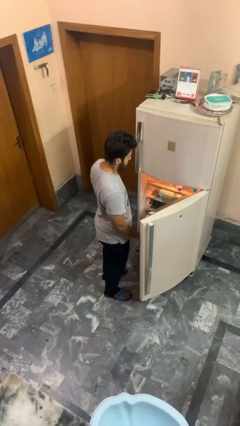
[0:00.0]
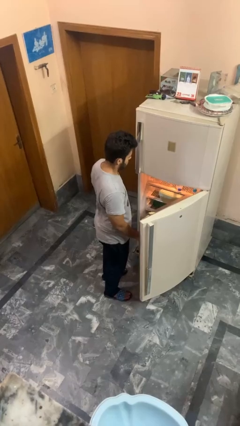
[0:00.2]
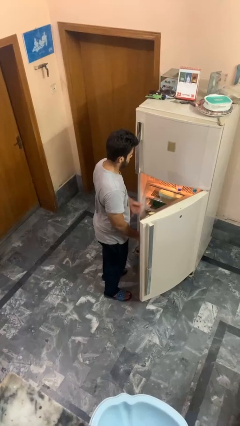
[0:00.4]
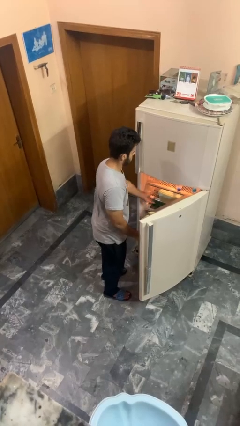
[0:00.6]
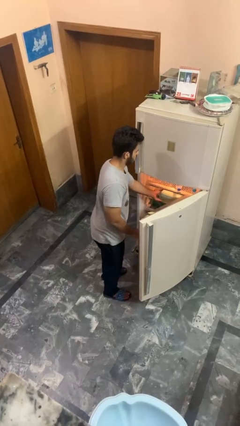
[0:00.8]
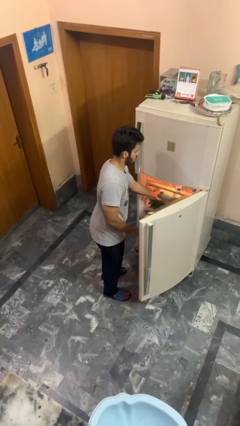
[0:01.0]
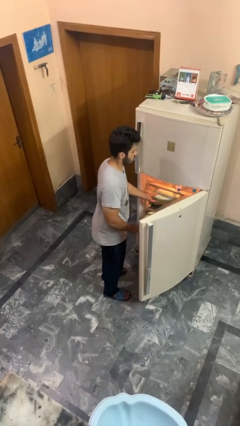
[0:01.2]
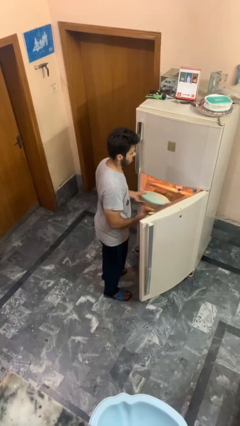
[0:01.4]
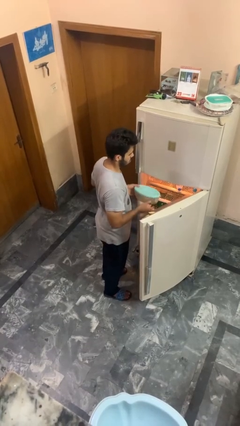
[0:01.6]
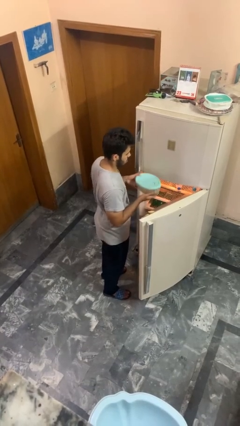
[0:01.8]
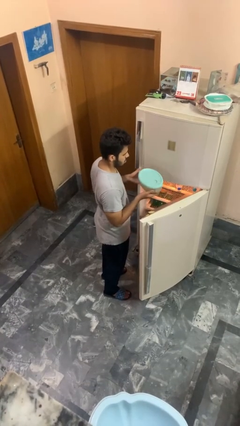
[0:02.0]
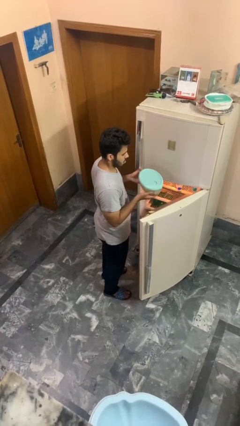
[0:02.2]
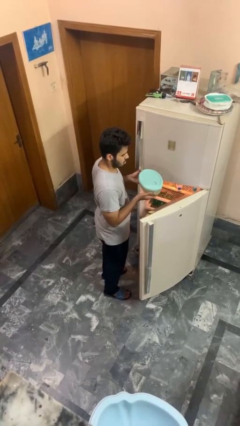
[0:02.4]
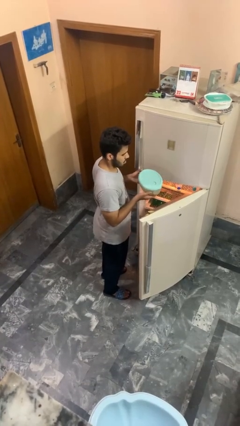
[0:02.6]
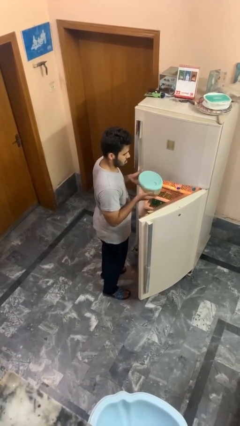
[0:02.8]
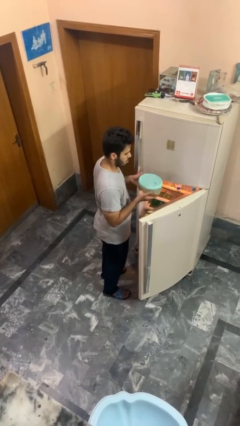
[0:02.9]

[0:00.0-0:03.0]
person picks up object from cabinet

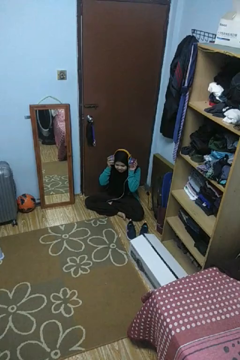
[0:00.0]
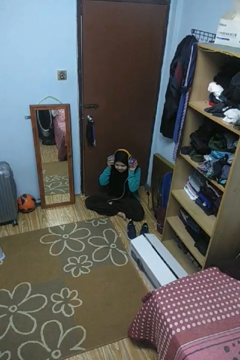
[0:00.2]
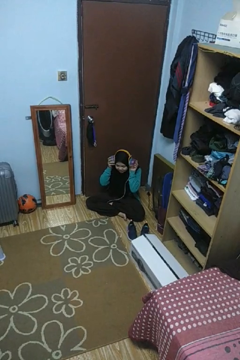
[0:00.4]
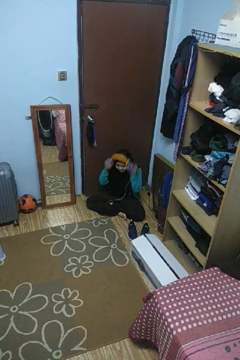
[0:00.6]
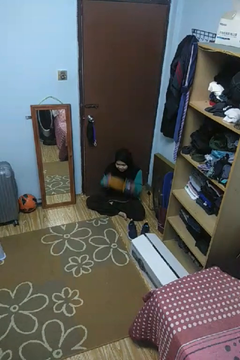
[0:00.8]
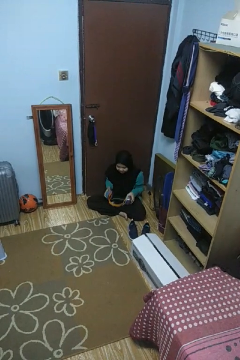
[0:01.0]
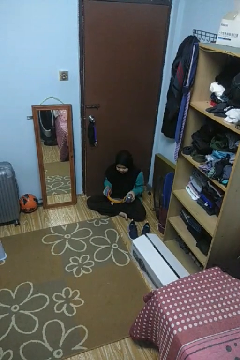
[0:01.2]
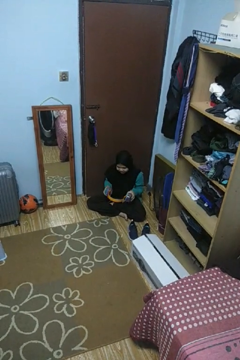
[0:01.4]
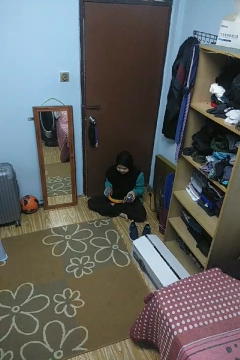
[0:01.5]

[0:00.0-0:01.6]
person takes off headphones

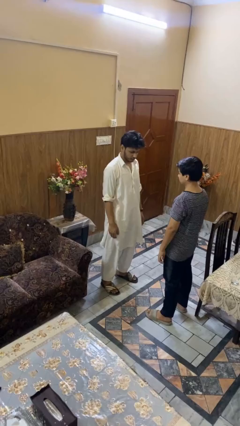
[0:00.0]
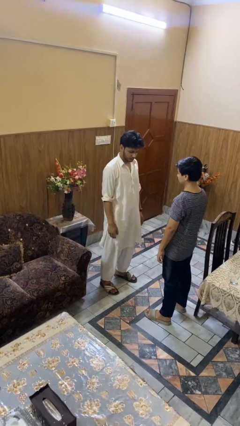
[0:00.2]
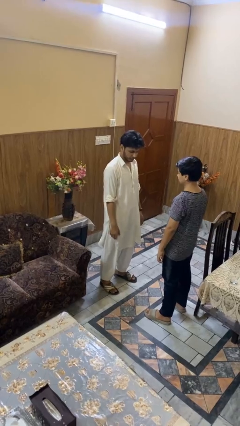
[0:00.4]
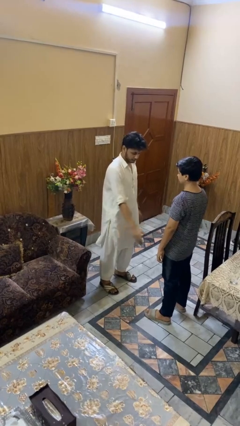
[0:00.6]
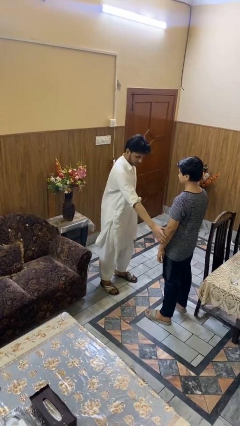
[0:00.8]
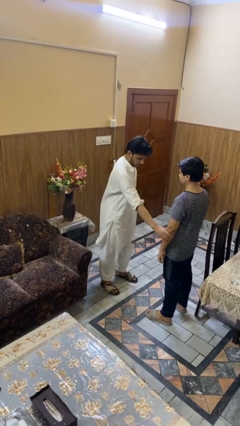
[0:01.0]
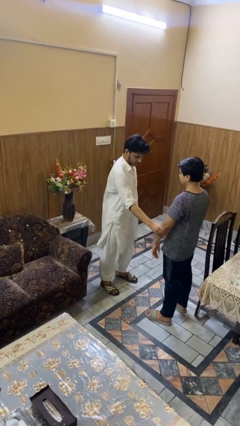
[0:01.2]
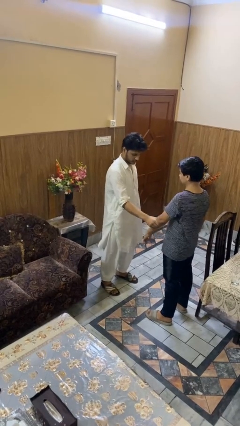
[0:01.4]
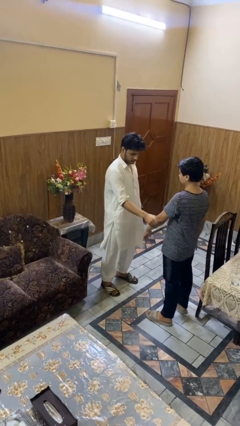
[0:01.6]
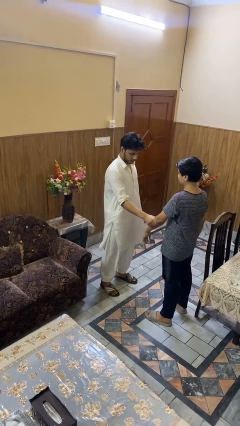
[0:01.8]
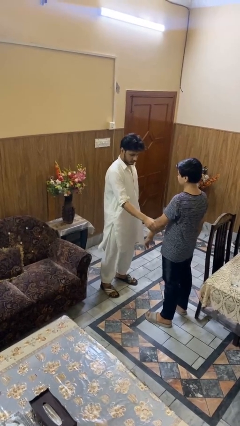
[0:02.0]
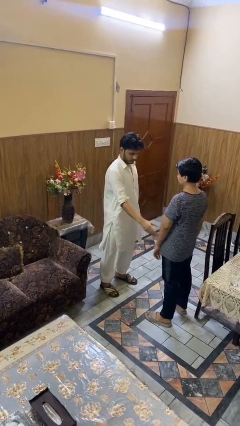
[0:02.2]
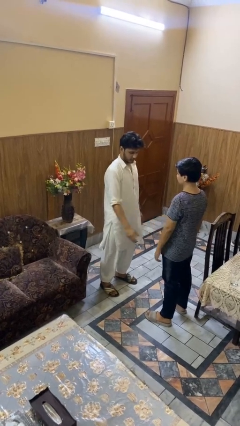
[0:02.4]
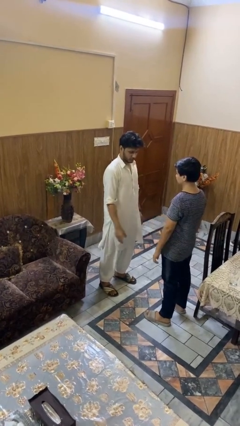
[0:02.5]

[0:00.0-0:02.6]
person grabs person by forearm

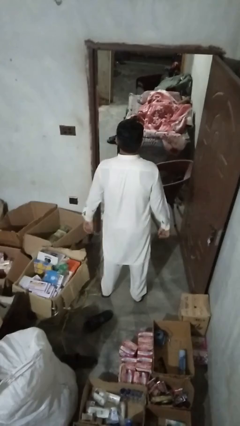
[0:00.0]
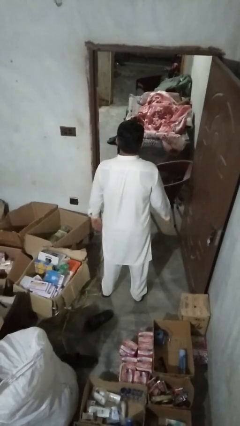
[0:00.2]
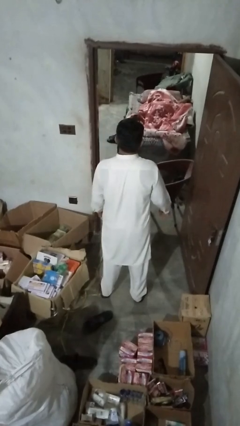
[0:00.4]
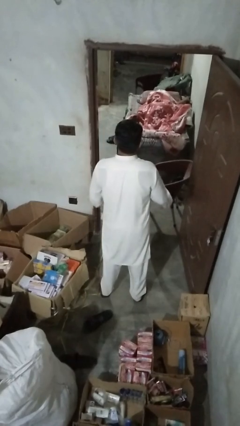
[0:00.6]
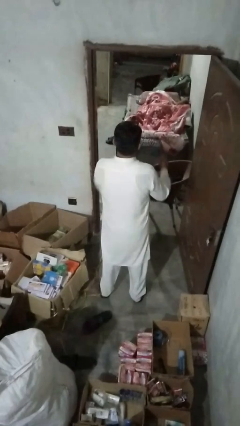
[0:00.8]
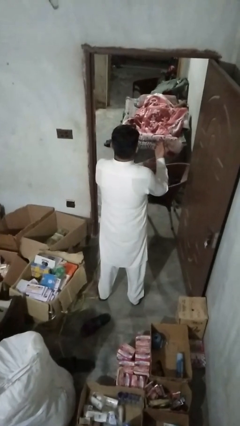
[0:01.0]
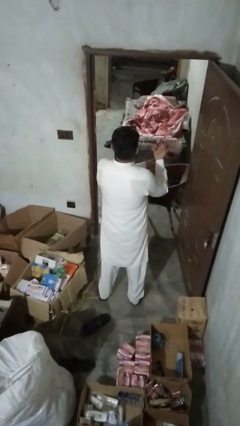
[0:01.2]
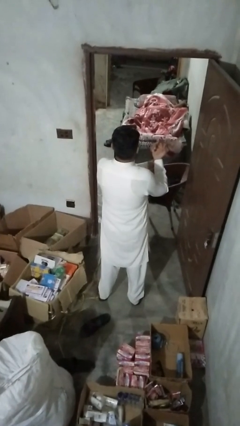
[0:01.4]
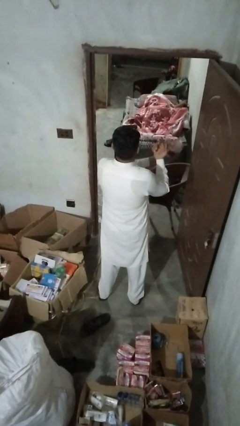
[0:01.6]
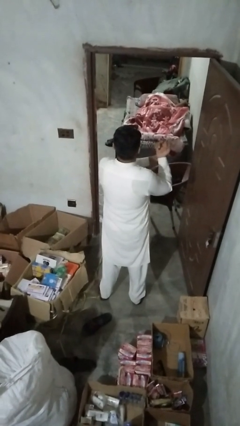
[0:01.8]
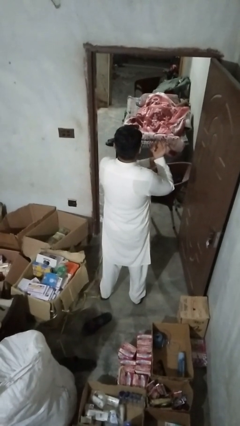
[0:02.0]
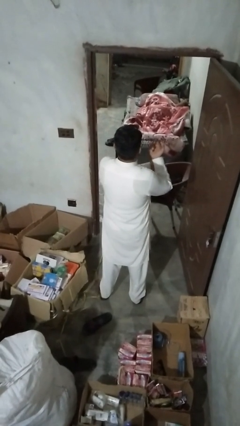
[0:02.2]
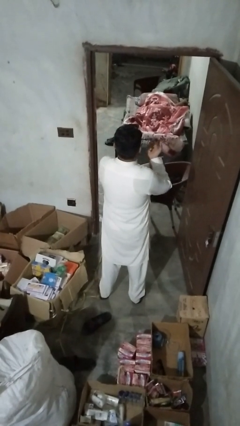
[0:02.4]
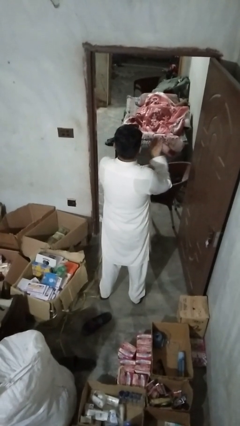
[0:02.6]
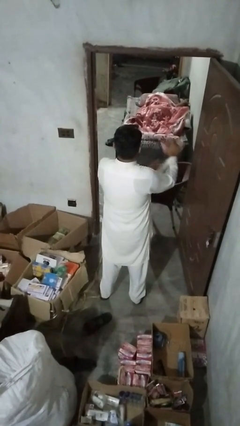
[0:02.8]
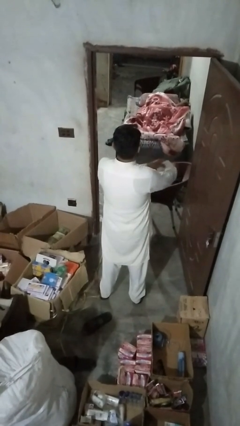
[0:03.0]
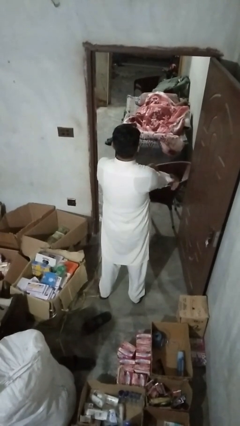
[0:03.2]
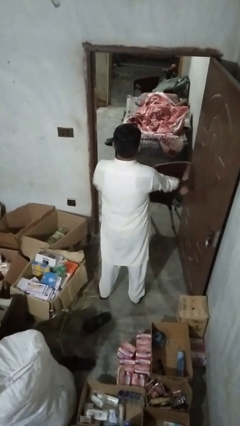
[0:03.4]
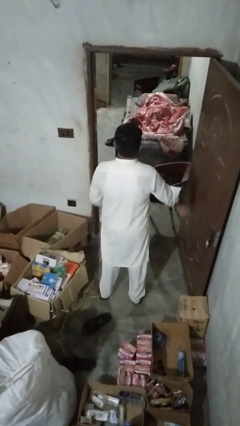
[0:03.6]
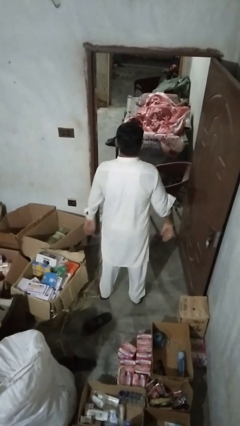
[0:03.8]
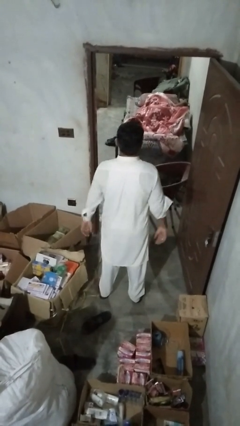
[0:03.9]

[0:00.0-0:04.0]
person unbuttons shirt

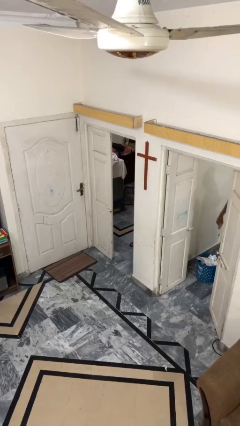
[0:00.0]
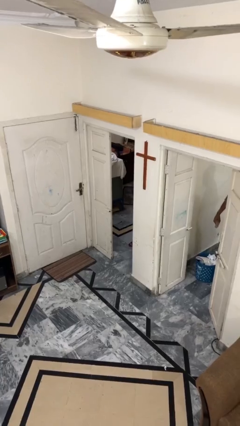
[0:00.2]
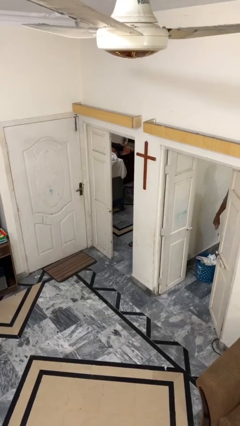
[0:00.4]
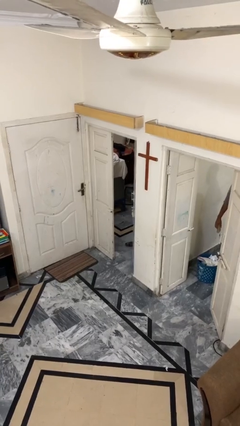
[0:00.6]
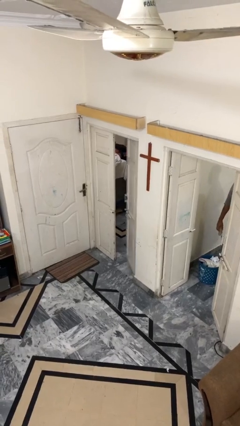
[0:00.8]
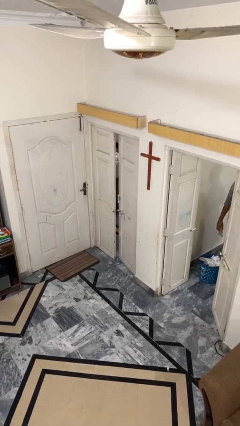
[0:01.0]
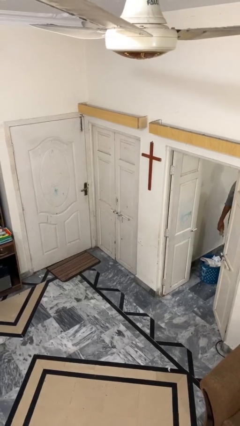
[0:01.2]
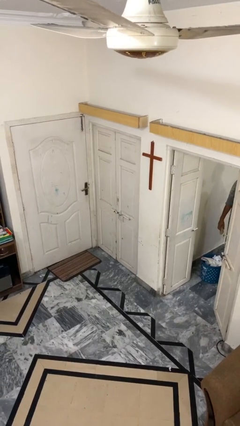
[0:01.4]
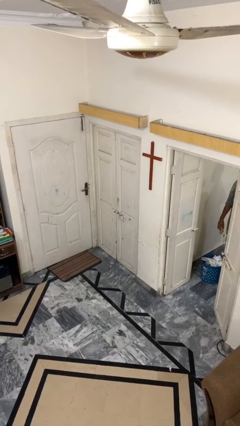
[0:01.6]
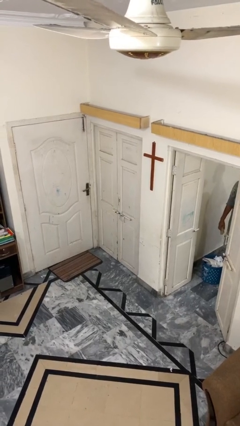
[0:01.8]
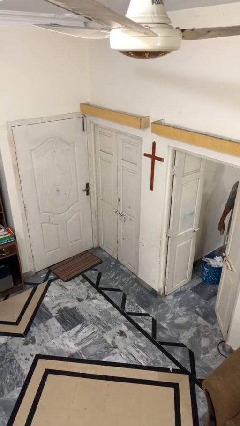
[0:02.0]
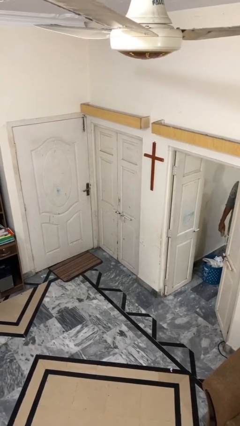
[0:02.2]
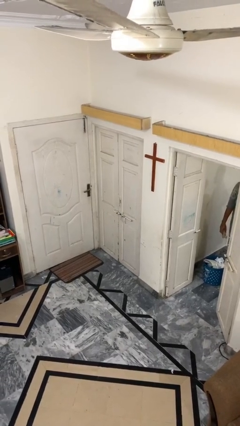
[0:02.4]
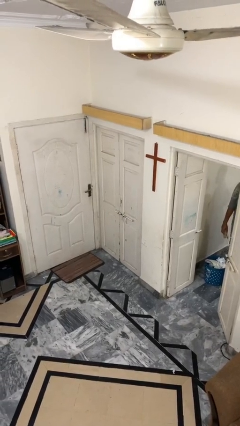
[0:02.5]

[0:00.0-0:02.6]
person closes facility door

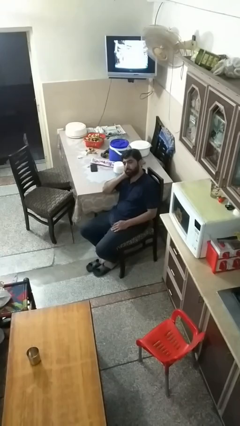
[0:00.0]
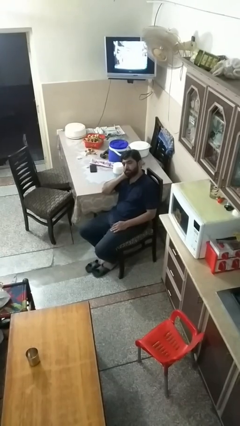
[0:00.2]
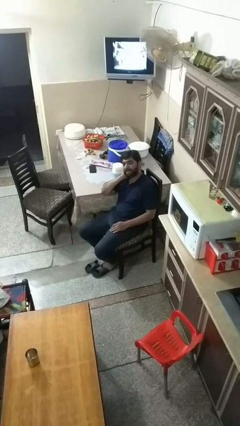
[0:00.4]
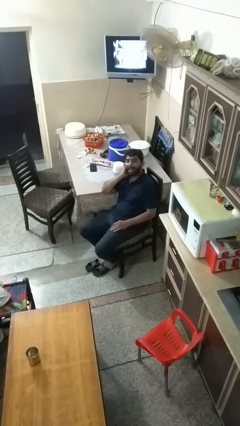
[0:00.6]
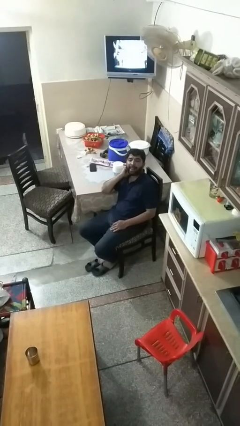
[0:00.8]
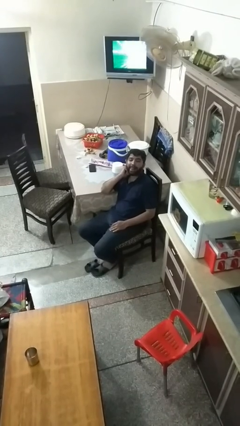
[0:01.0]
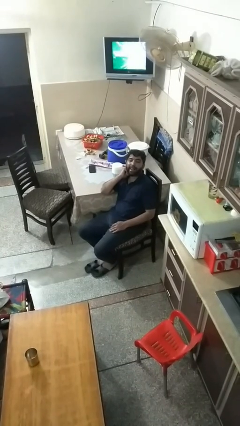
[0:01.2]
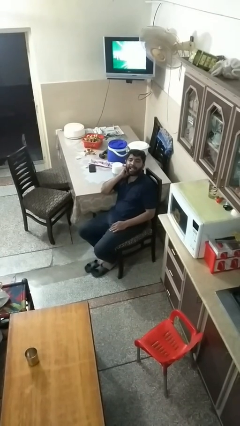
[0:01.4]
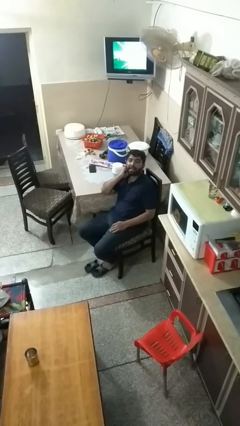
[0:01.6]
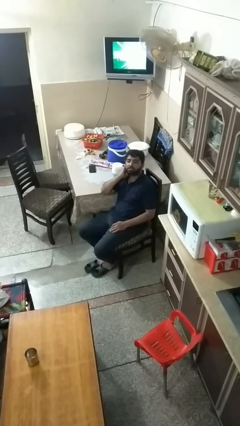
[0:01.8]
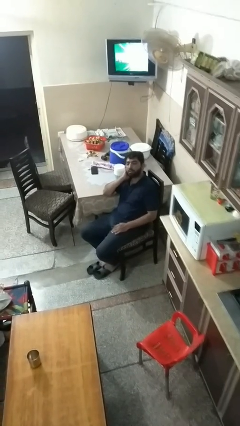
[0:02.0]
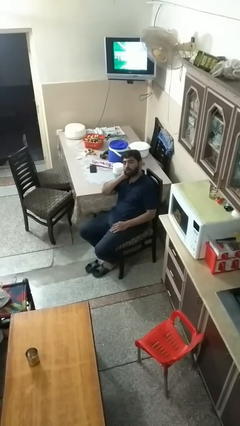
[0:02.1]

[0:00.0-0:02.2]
person sticks out tongue

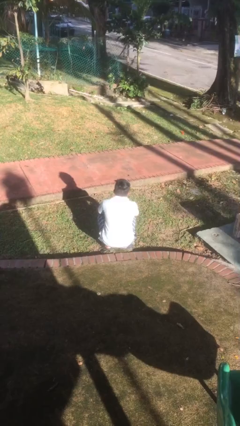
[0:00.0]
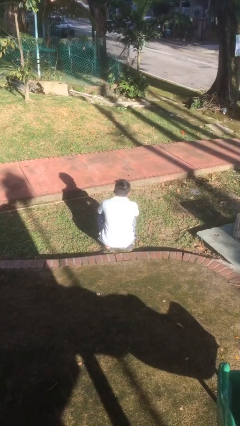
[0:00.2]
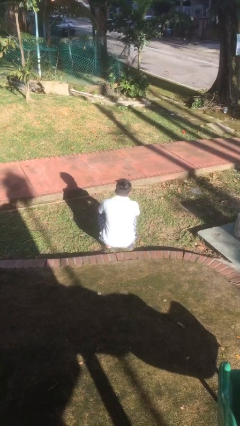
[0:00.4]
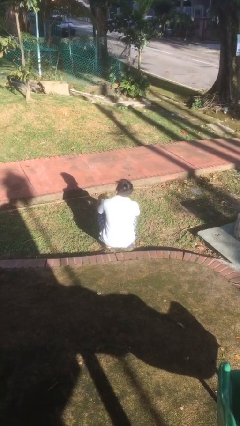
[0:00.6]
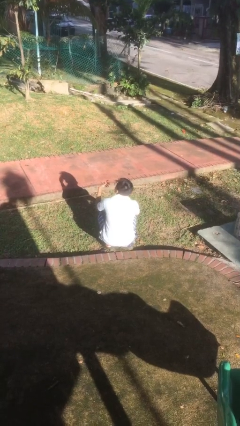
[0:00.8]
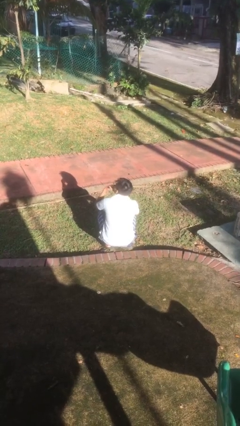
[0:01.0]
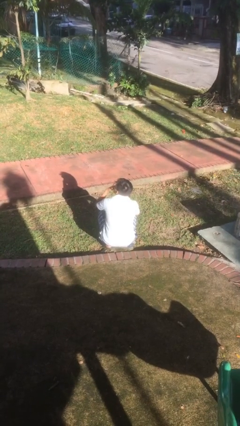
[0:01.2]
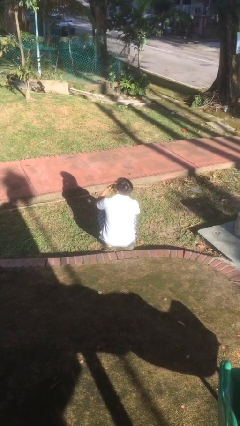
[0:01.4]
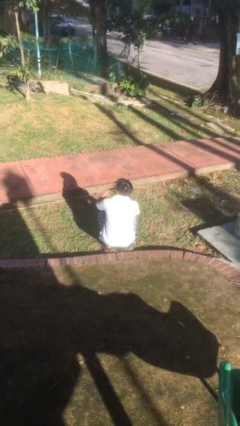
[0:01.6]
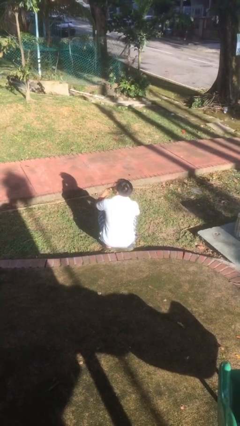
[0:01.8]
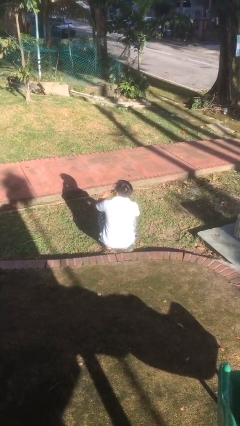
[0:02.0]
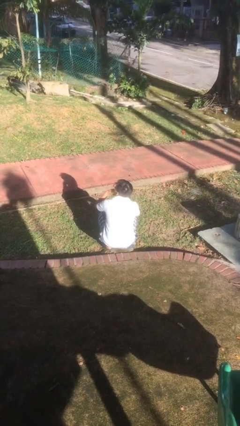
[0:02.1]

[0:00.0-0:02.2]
person strokes chin
